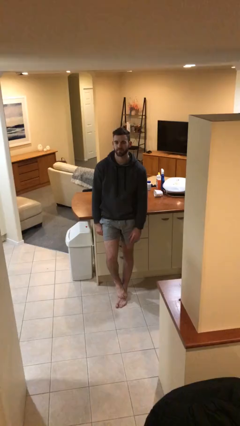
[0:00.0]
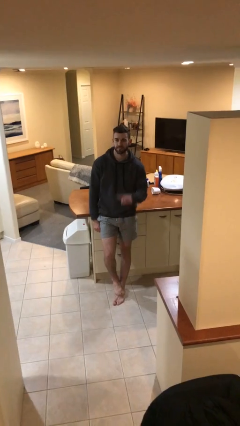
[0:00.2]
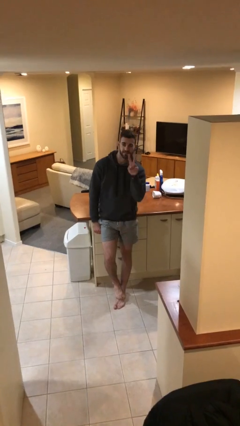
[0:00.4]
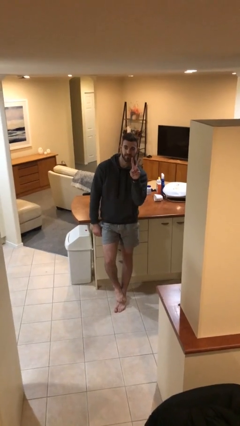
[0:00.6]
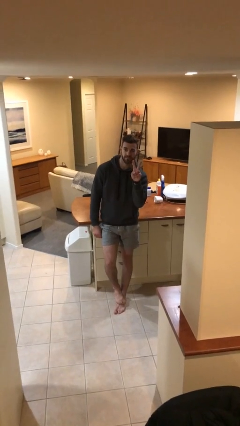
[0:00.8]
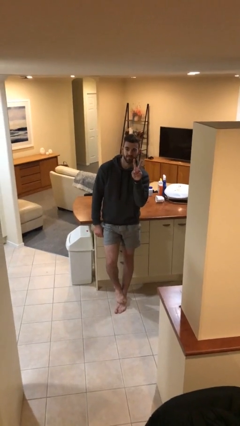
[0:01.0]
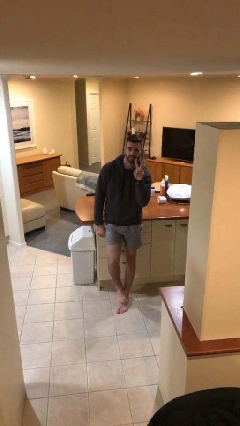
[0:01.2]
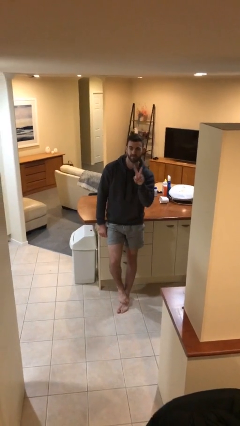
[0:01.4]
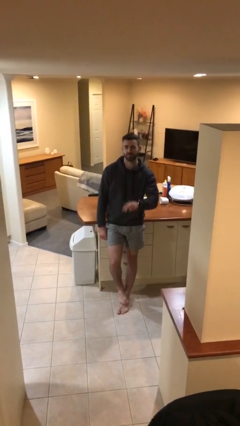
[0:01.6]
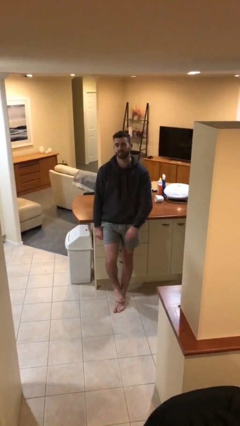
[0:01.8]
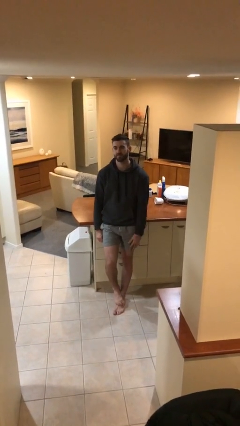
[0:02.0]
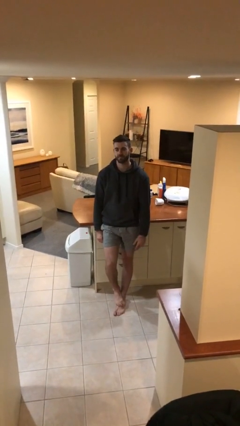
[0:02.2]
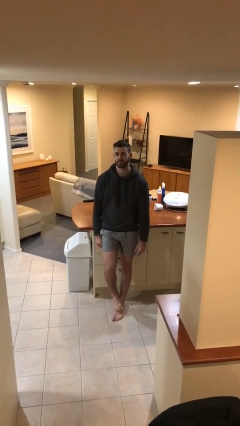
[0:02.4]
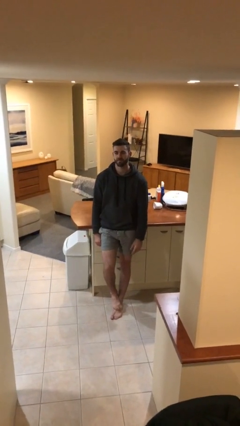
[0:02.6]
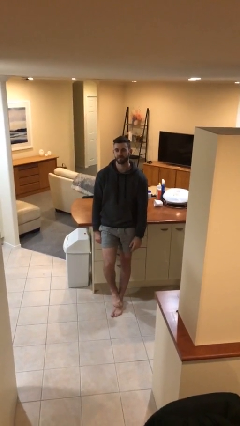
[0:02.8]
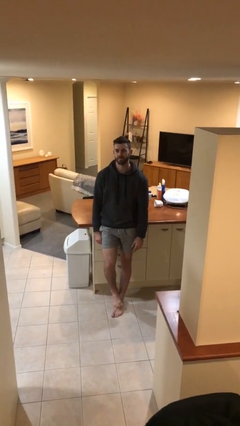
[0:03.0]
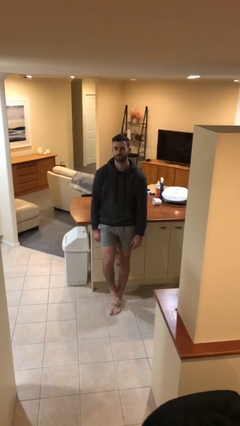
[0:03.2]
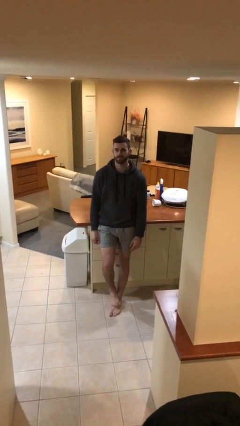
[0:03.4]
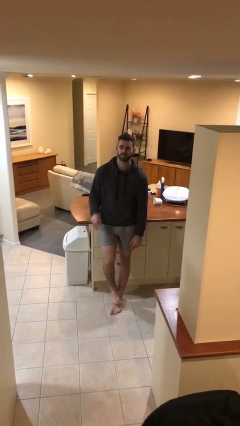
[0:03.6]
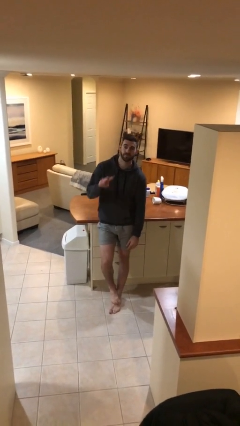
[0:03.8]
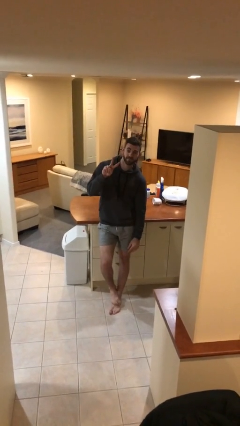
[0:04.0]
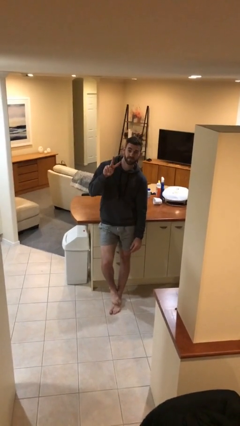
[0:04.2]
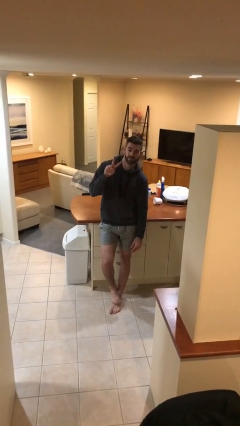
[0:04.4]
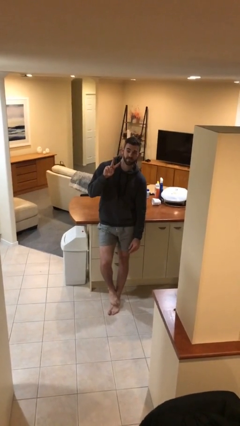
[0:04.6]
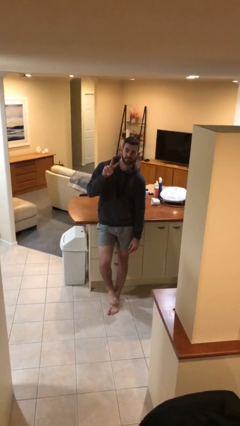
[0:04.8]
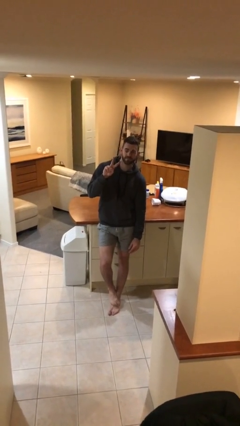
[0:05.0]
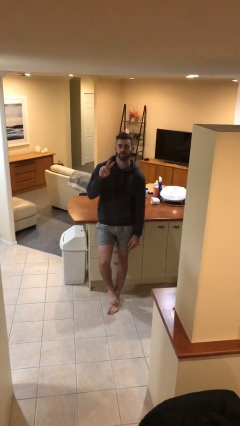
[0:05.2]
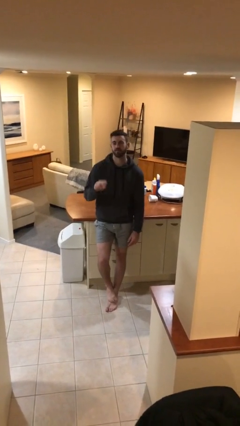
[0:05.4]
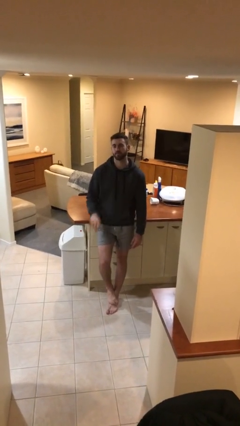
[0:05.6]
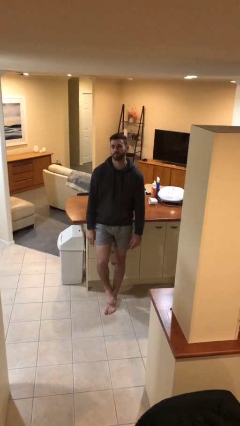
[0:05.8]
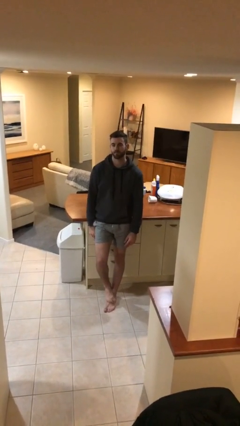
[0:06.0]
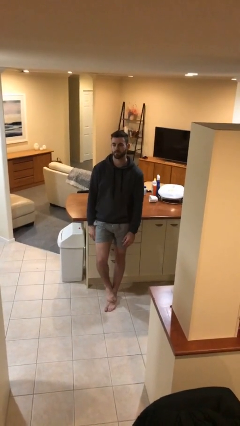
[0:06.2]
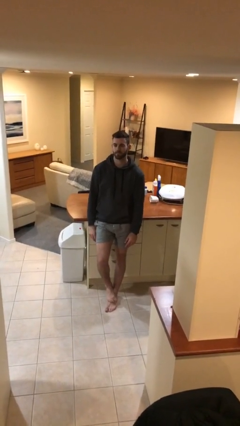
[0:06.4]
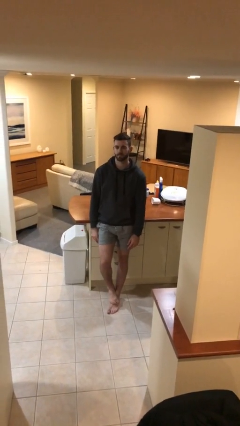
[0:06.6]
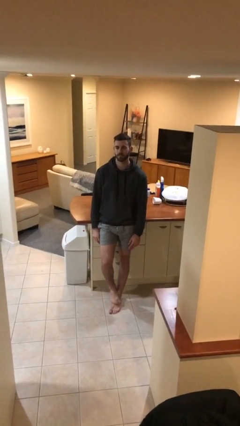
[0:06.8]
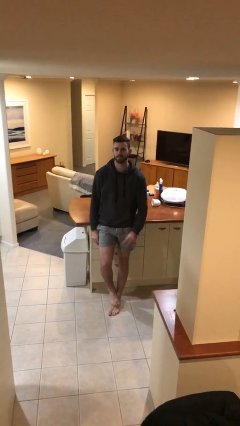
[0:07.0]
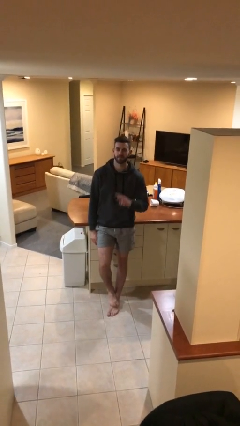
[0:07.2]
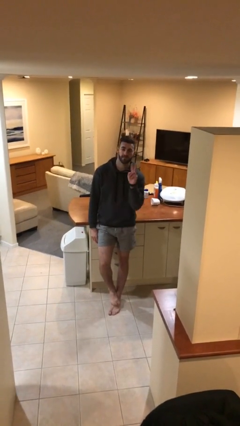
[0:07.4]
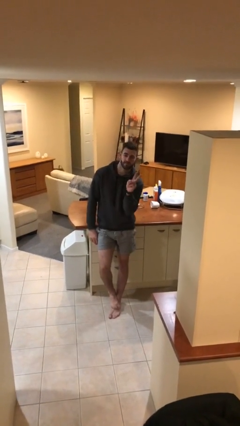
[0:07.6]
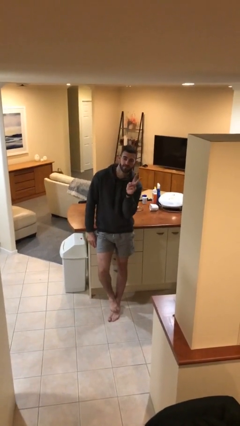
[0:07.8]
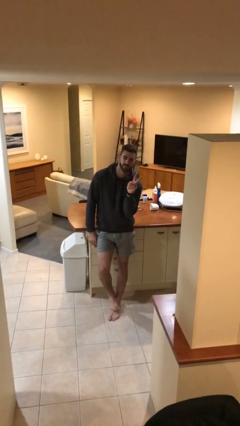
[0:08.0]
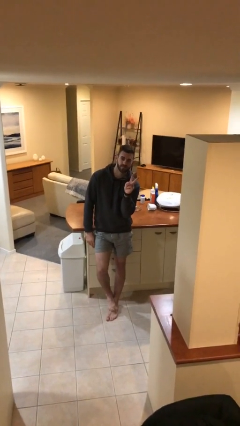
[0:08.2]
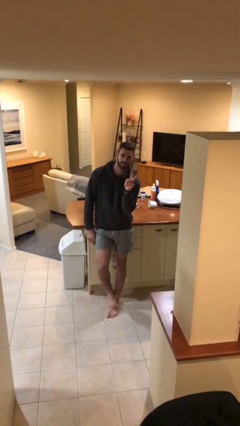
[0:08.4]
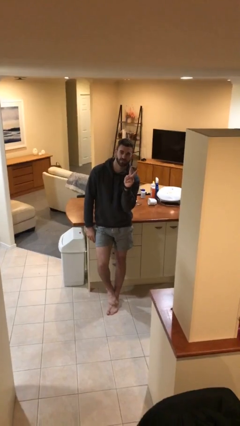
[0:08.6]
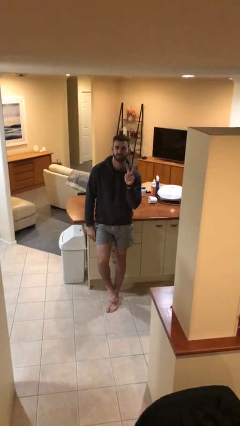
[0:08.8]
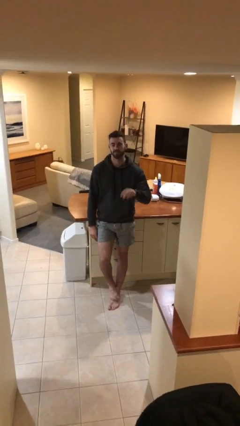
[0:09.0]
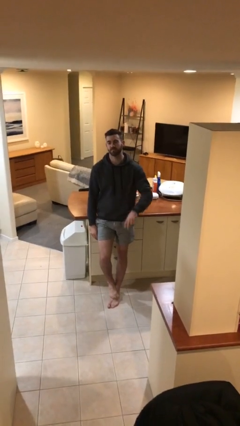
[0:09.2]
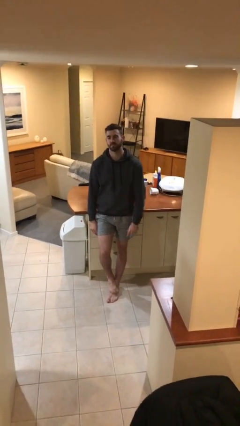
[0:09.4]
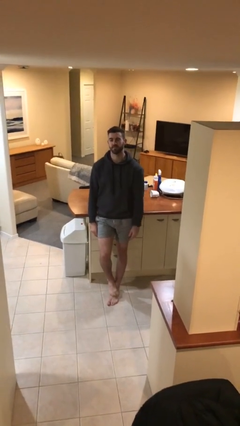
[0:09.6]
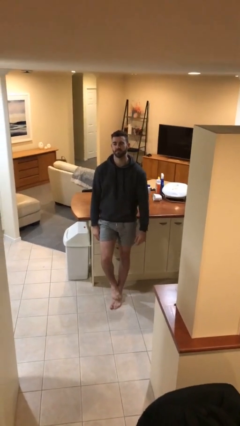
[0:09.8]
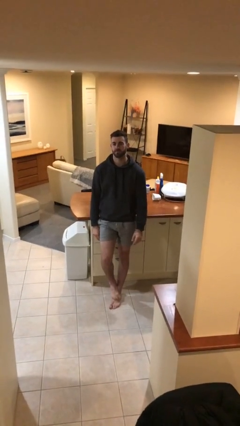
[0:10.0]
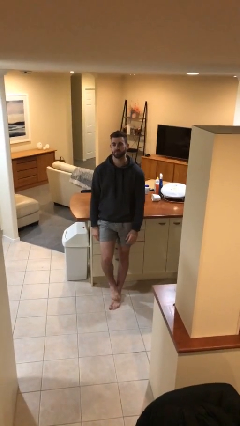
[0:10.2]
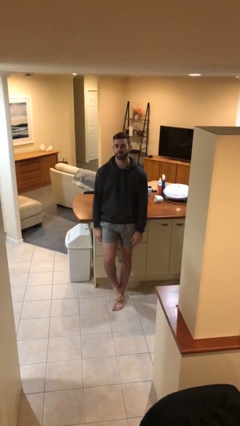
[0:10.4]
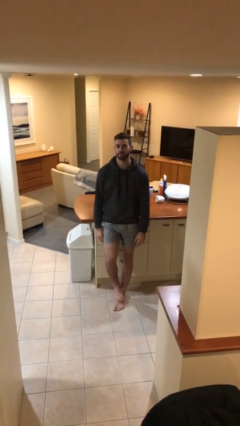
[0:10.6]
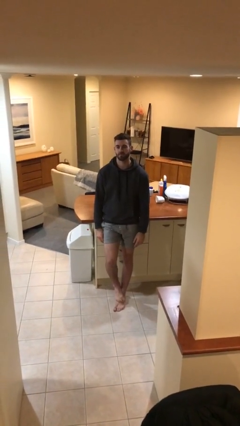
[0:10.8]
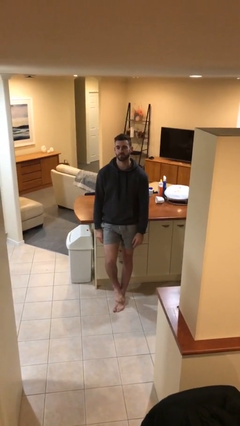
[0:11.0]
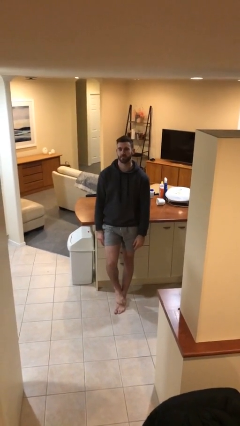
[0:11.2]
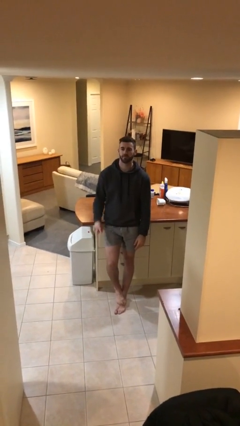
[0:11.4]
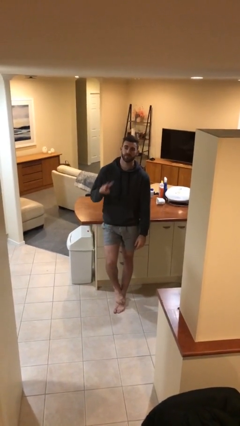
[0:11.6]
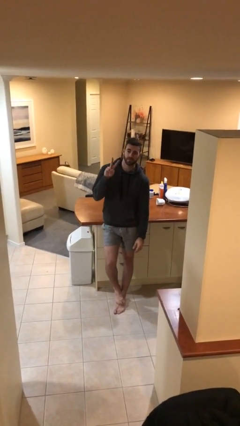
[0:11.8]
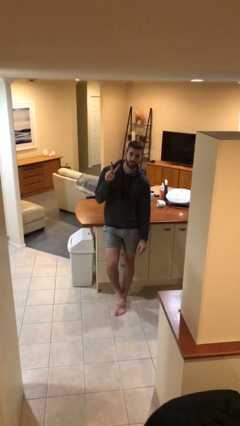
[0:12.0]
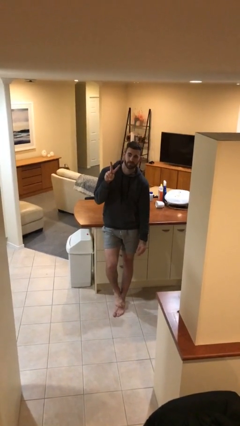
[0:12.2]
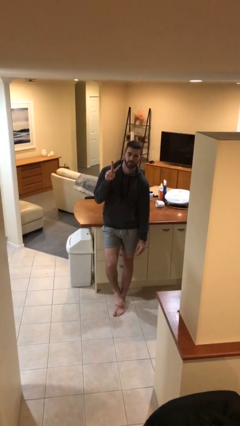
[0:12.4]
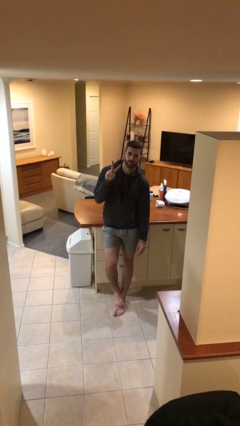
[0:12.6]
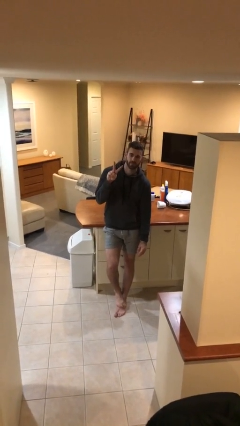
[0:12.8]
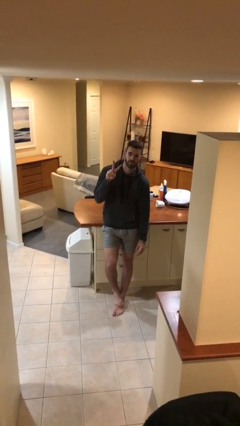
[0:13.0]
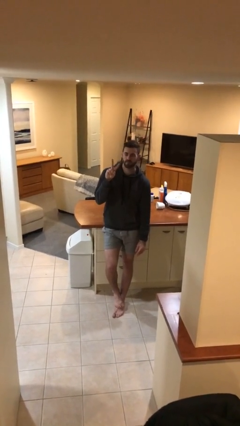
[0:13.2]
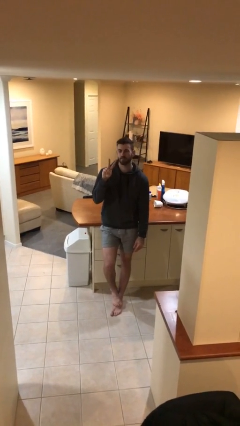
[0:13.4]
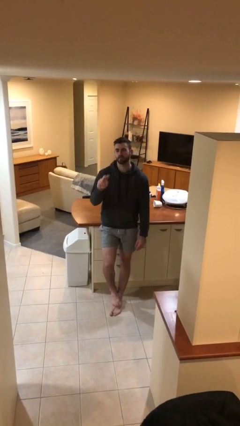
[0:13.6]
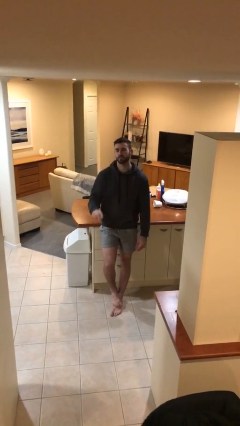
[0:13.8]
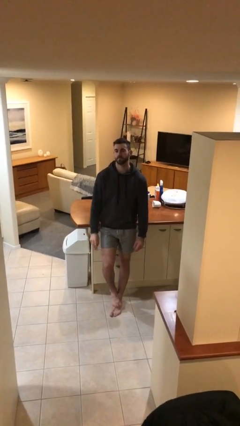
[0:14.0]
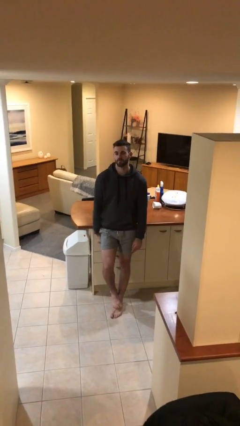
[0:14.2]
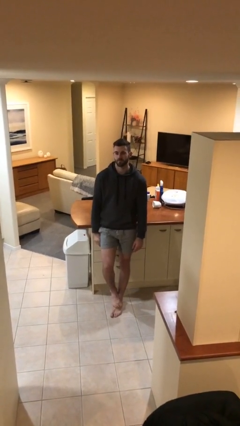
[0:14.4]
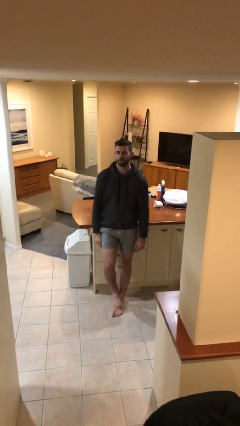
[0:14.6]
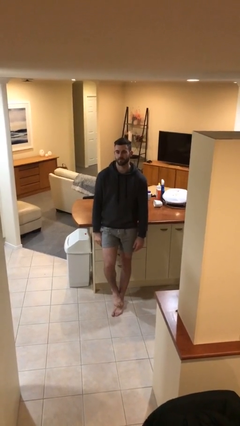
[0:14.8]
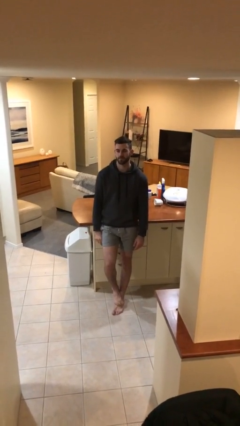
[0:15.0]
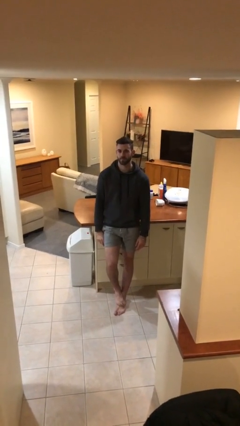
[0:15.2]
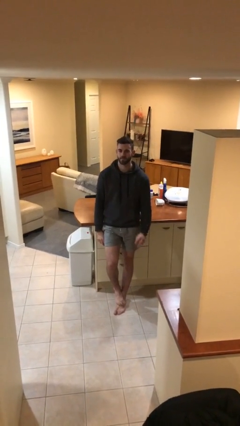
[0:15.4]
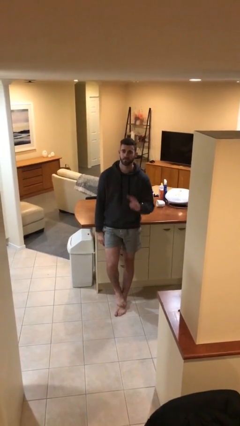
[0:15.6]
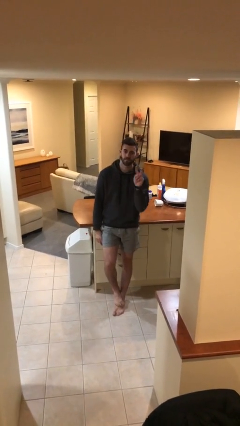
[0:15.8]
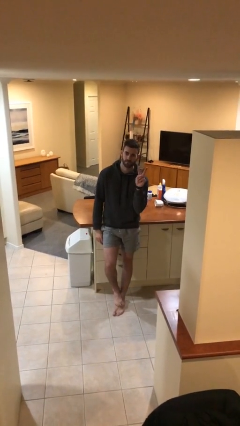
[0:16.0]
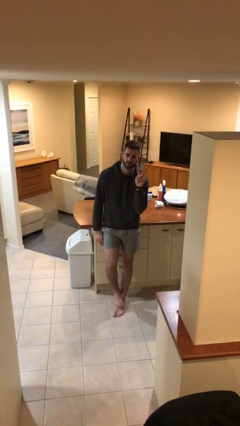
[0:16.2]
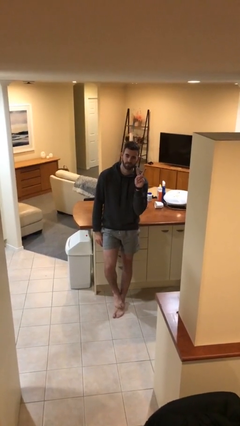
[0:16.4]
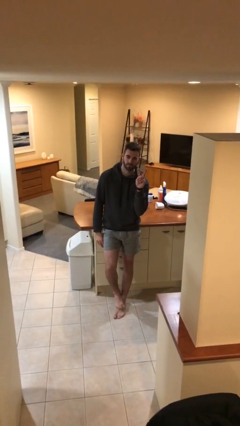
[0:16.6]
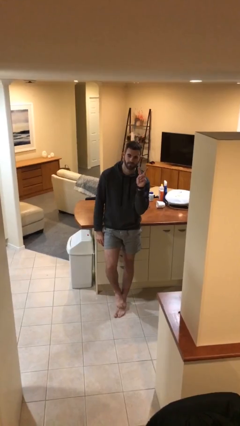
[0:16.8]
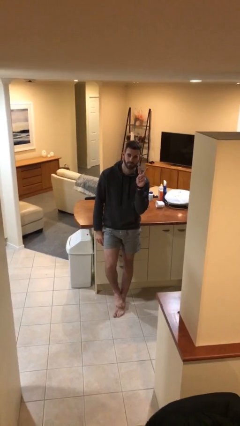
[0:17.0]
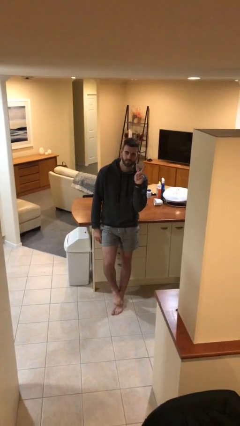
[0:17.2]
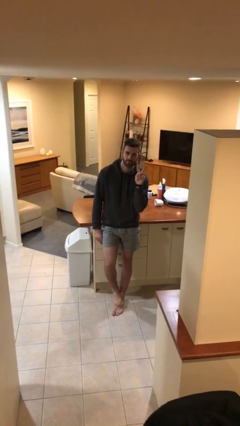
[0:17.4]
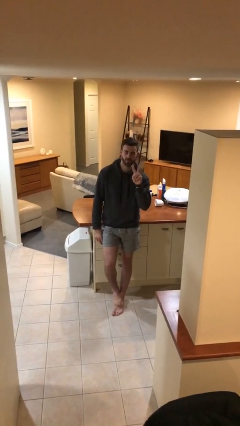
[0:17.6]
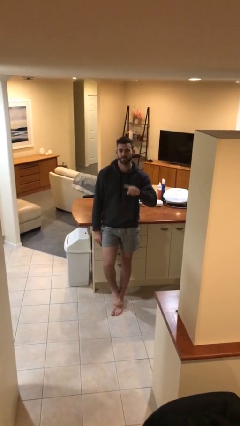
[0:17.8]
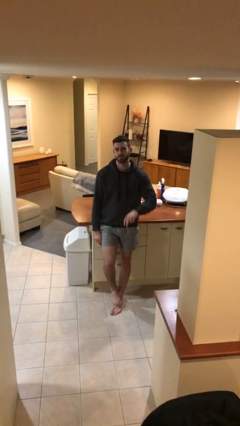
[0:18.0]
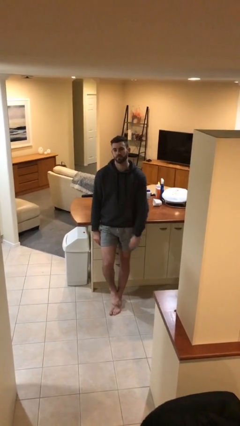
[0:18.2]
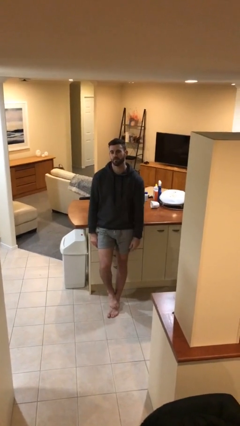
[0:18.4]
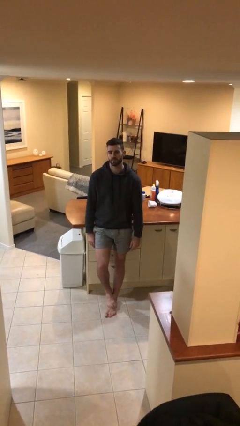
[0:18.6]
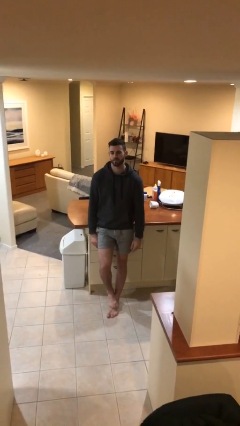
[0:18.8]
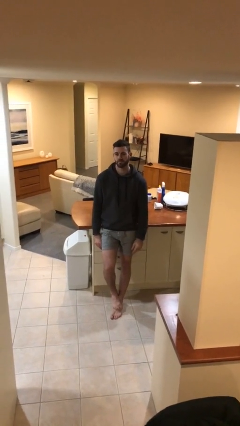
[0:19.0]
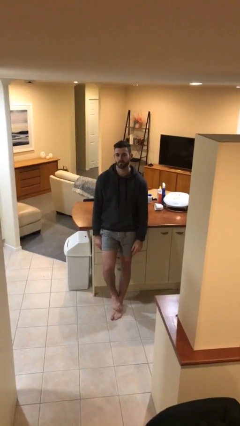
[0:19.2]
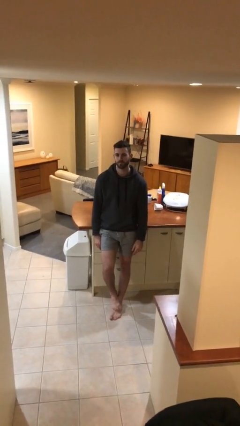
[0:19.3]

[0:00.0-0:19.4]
person gestures peace
